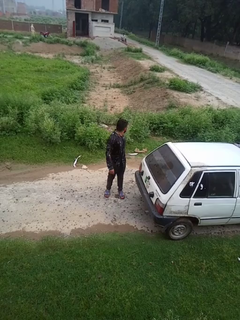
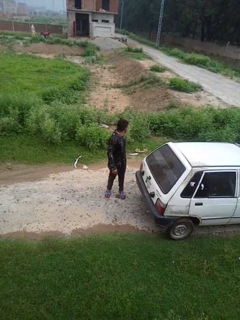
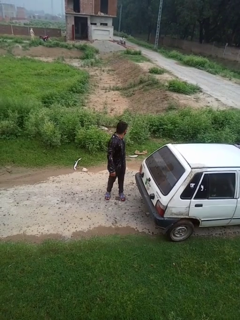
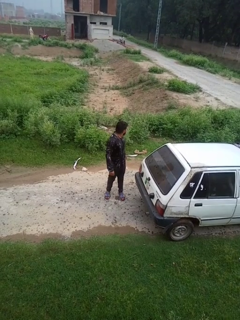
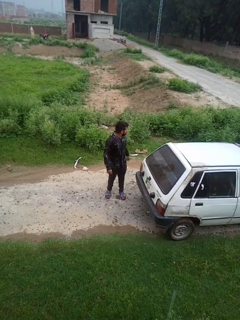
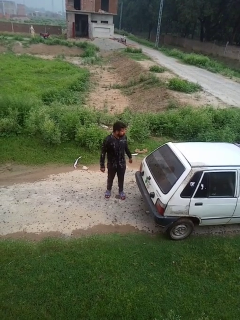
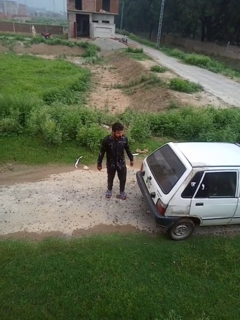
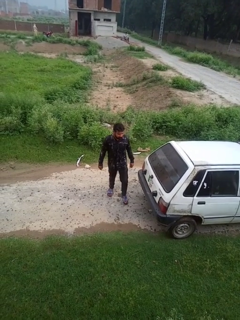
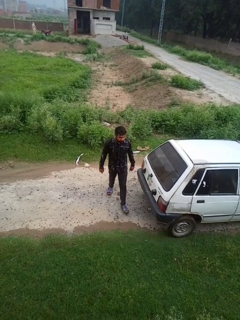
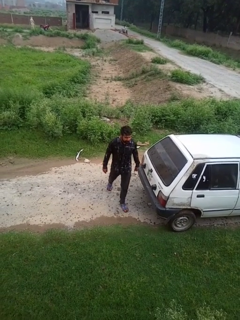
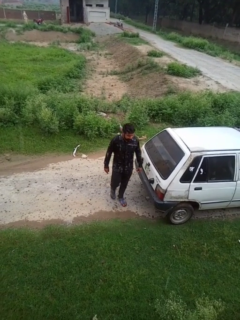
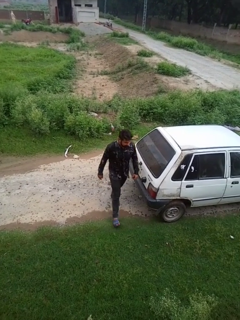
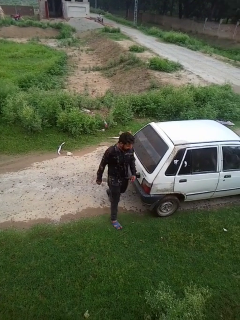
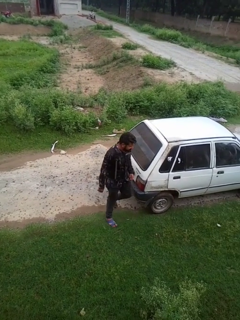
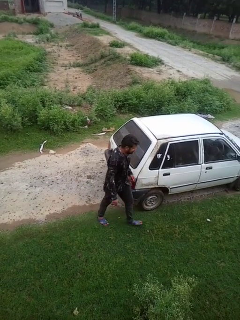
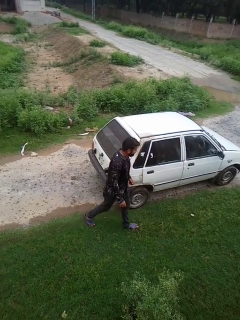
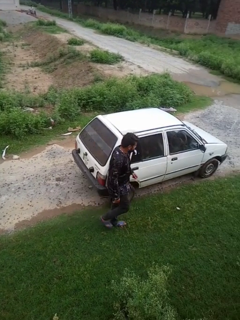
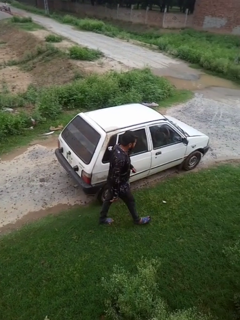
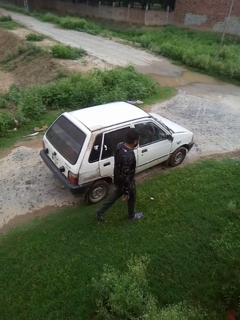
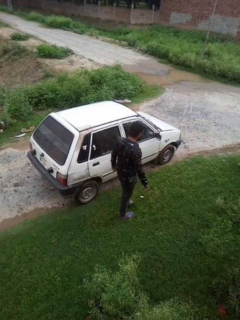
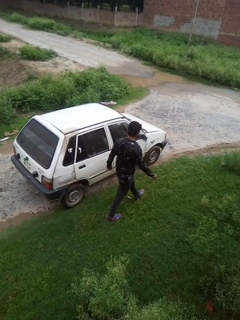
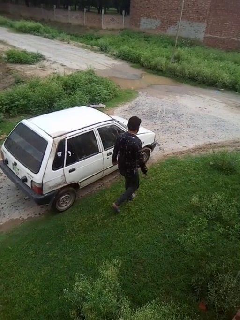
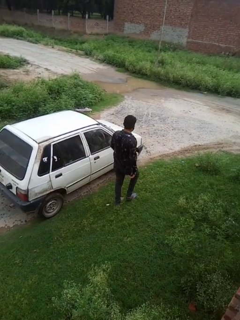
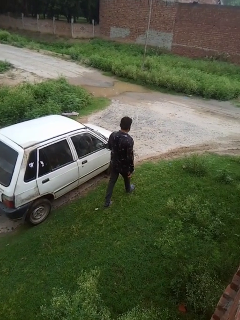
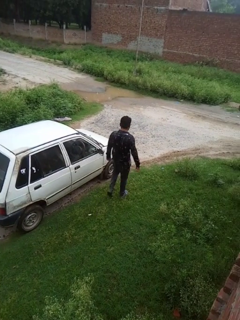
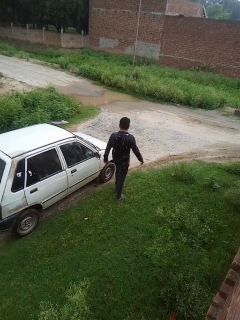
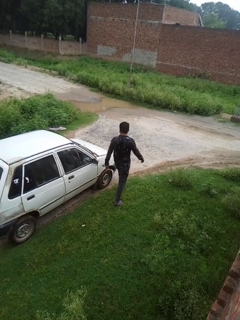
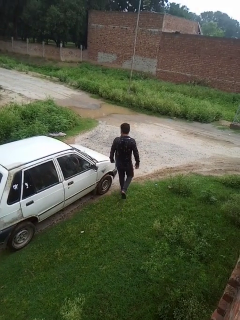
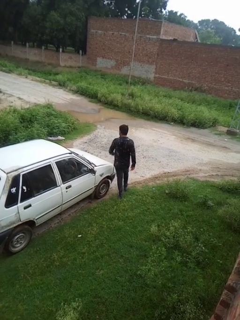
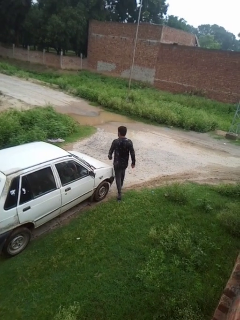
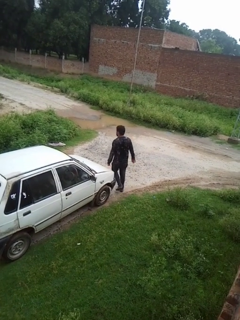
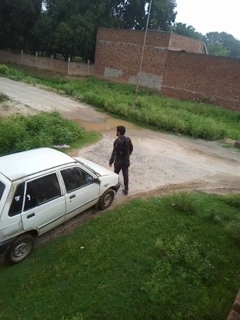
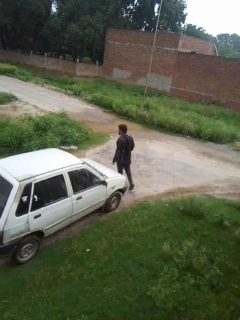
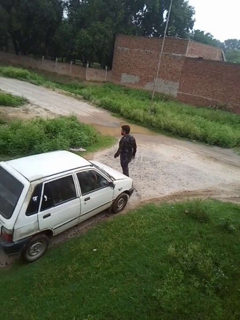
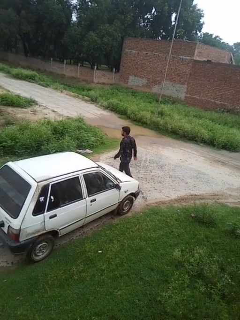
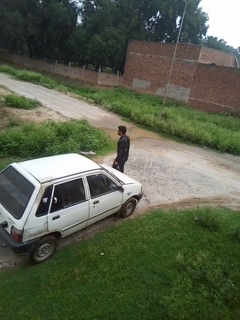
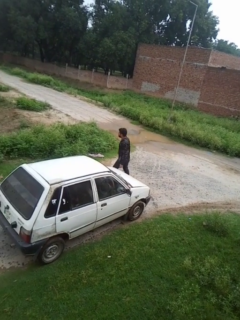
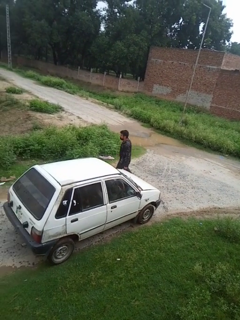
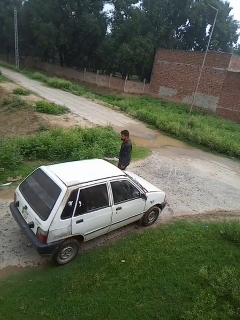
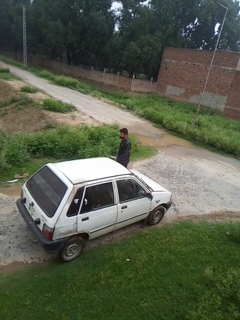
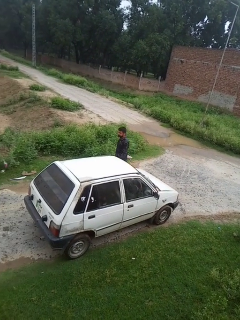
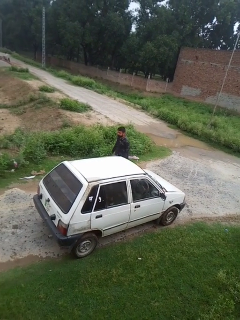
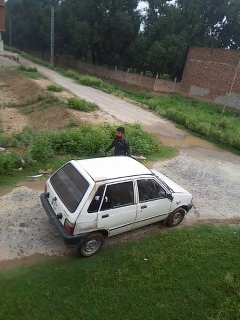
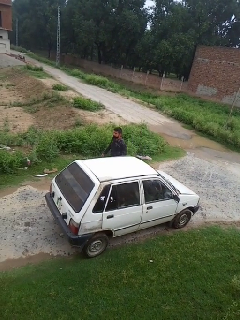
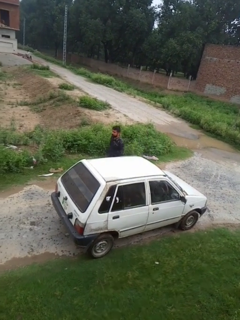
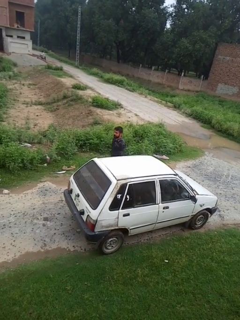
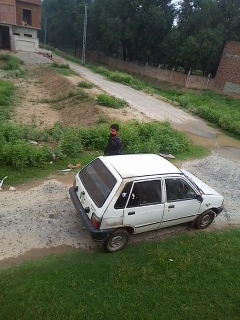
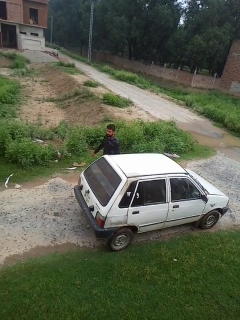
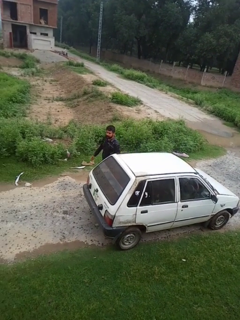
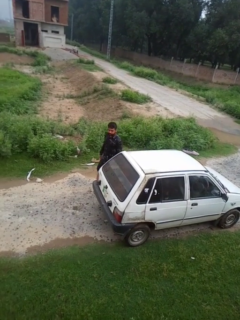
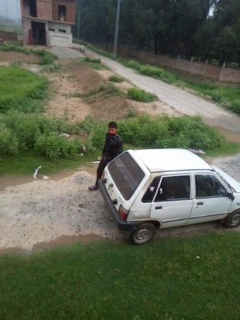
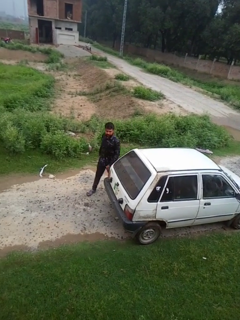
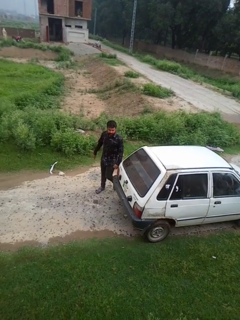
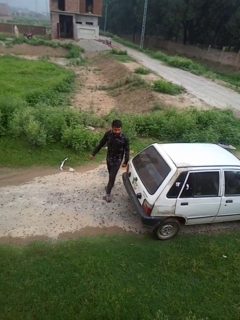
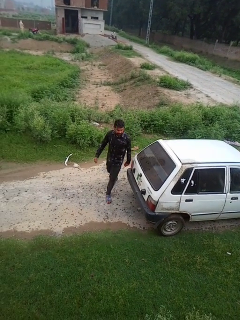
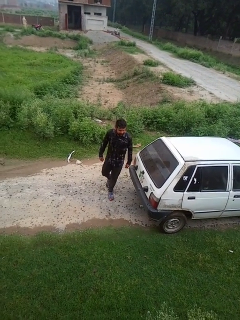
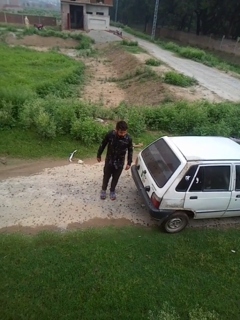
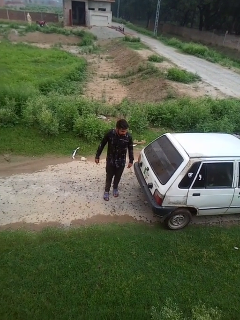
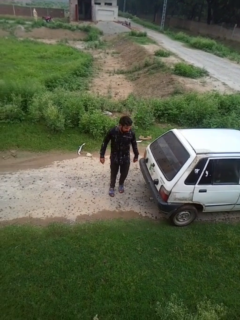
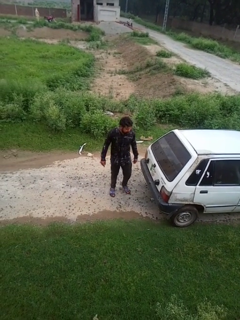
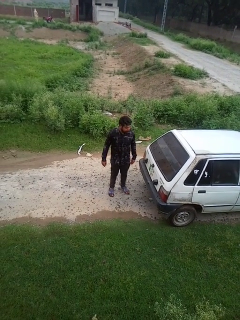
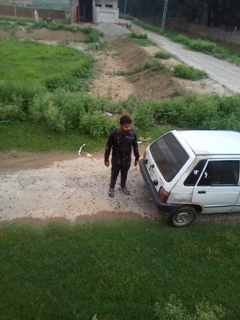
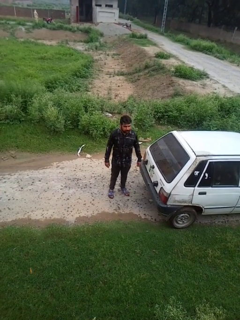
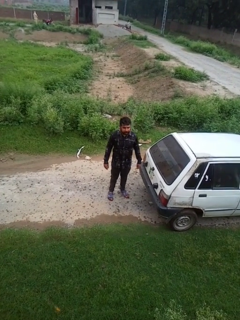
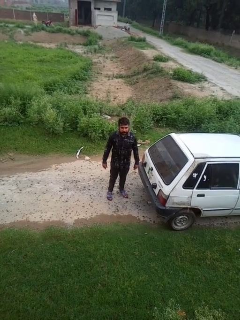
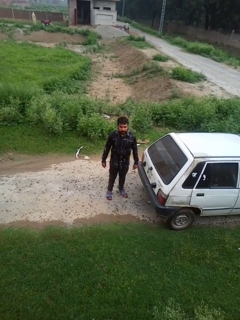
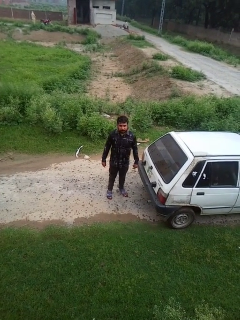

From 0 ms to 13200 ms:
person walks around car

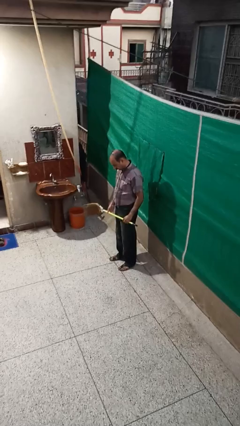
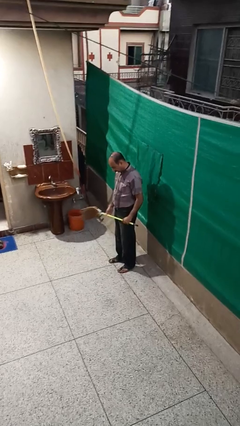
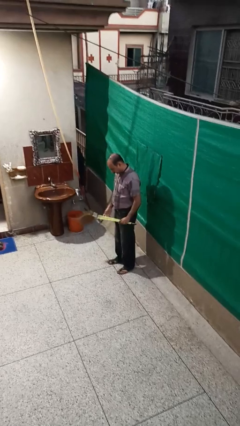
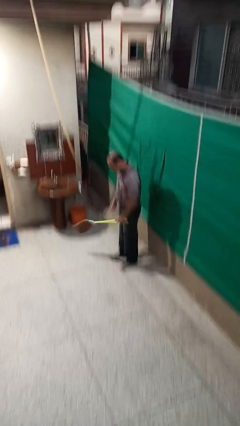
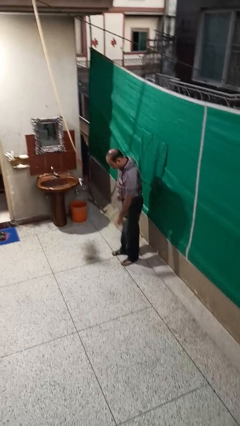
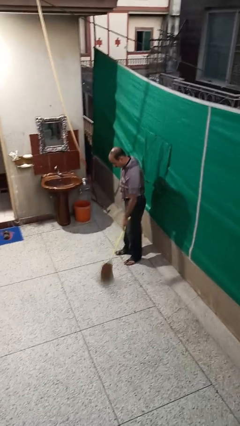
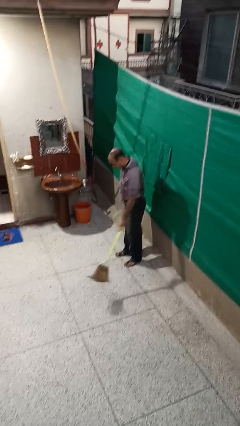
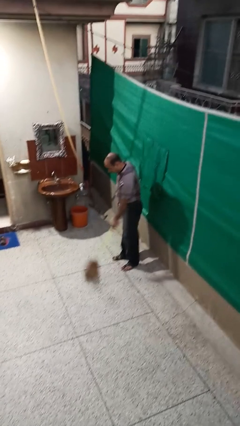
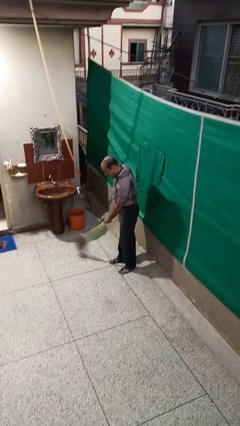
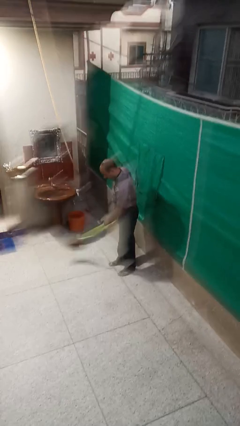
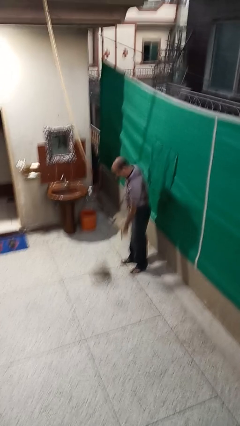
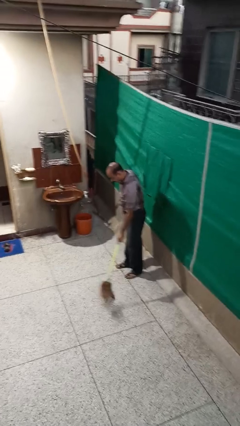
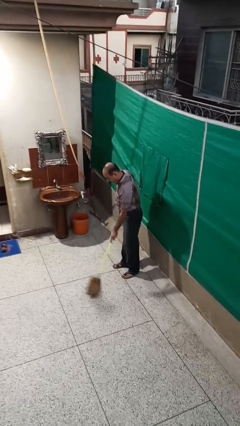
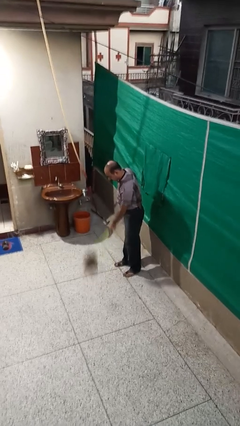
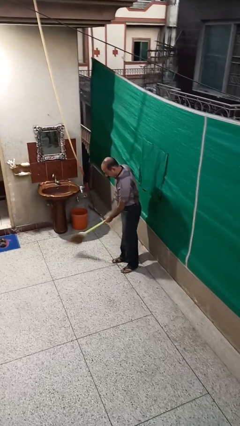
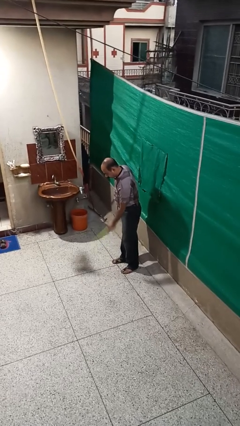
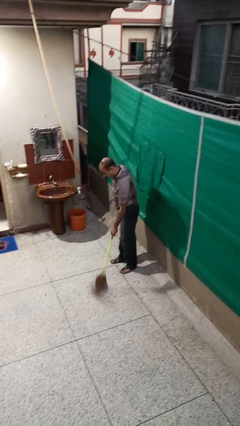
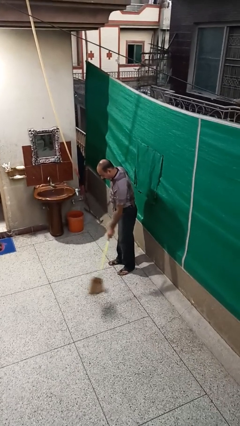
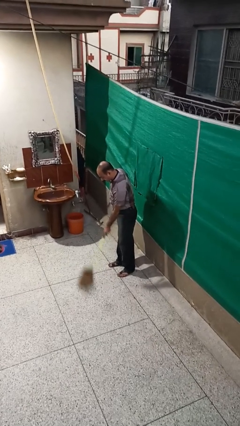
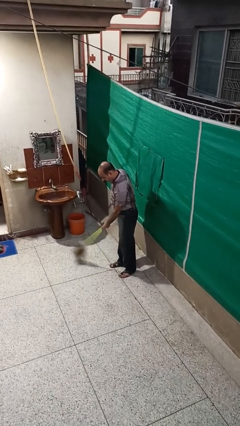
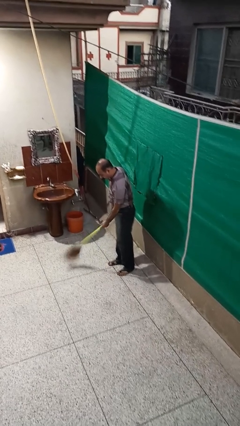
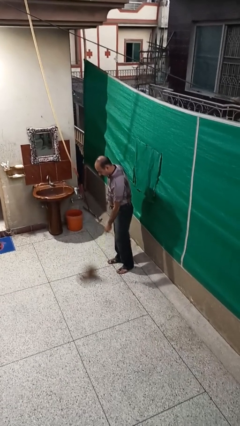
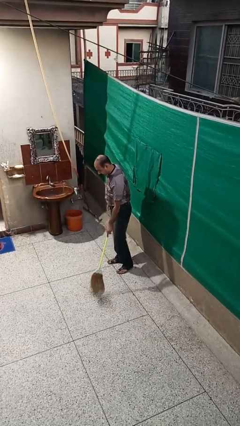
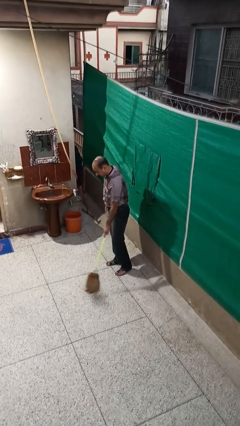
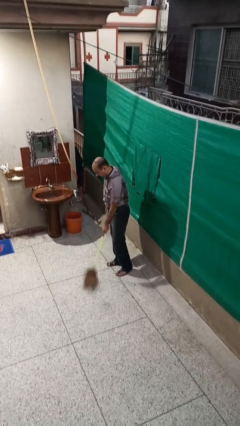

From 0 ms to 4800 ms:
person sweeps floor

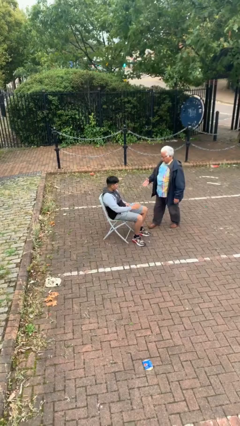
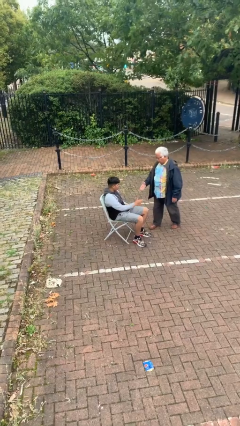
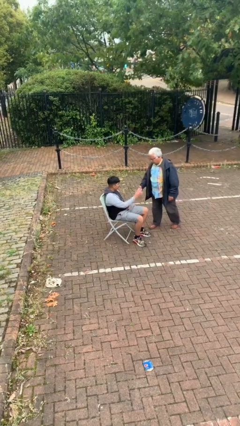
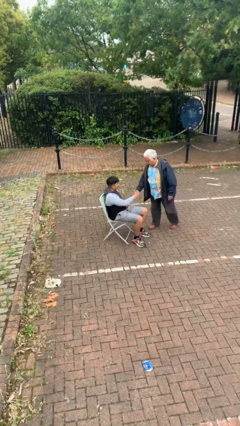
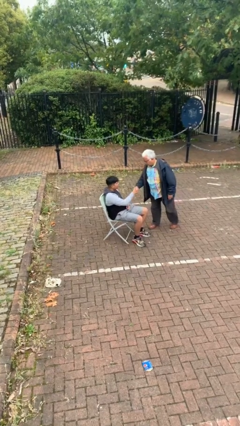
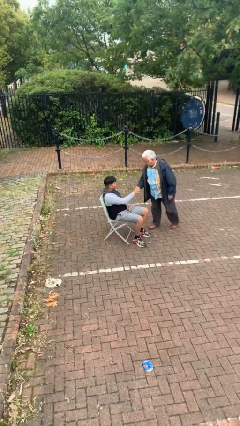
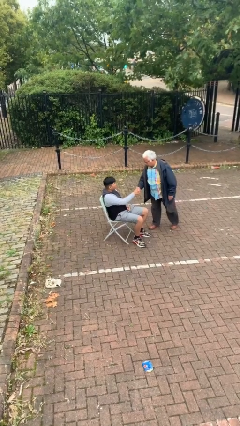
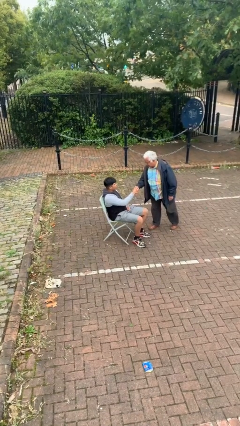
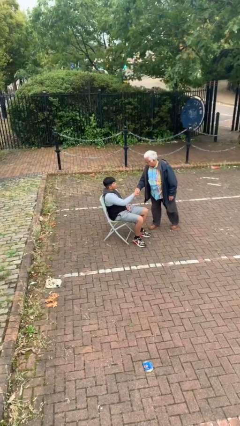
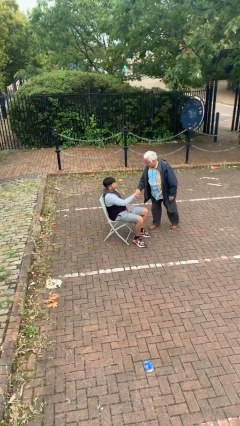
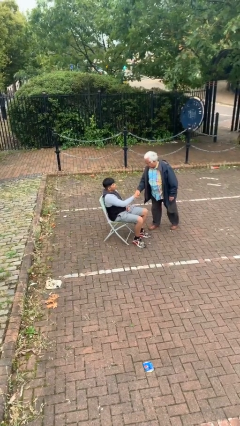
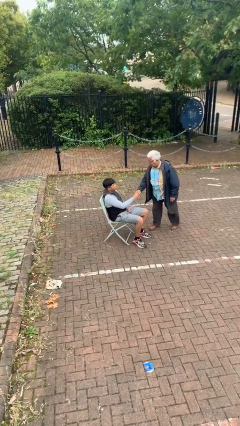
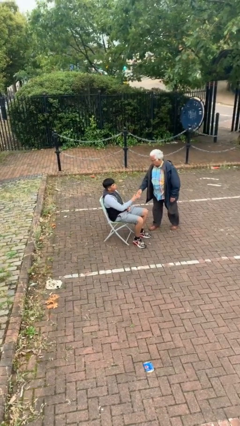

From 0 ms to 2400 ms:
person shakes hand

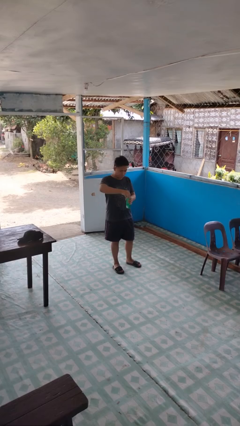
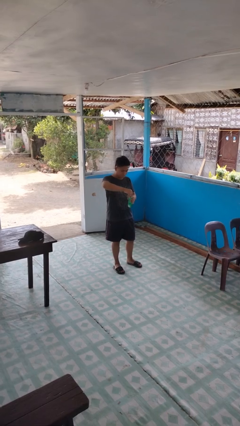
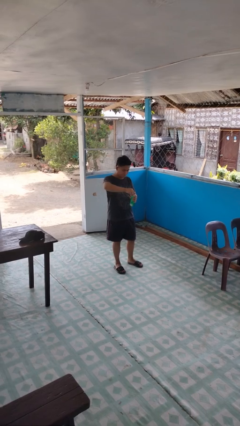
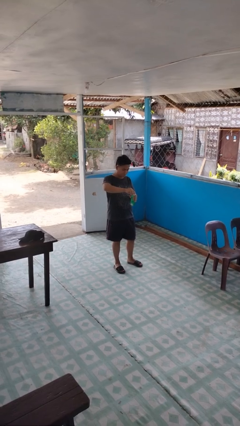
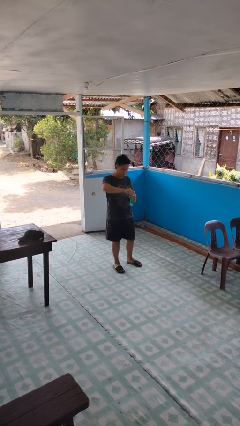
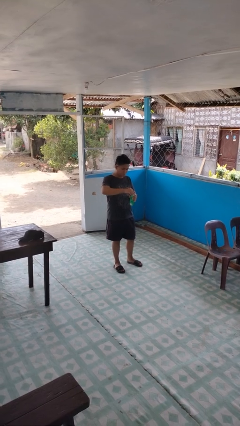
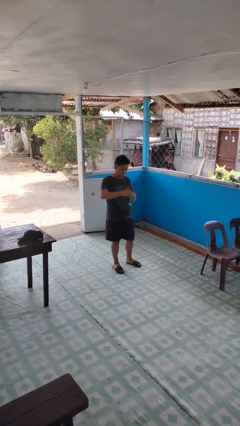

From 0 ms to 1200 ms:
person opens beverage can
